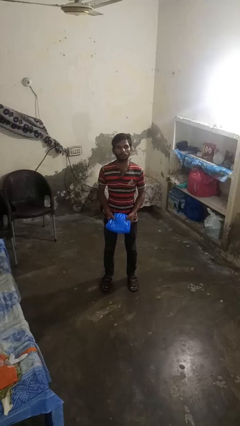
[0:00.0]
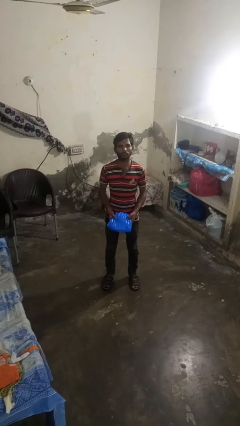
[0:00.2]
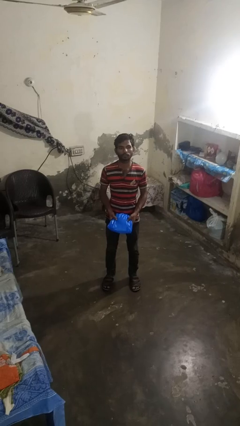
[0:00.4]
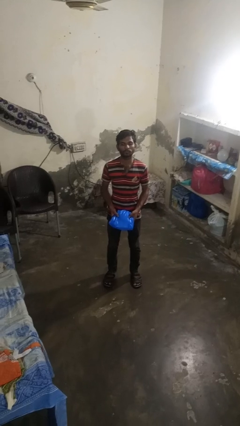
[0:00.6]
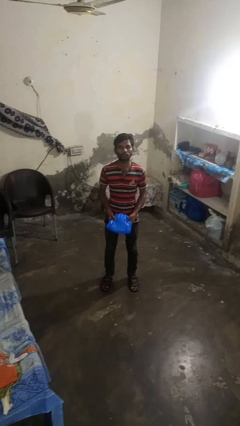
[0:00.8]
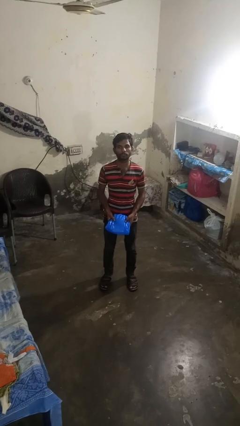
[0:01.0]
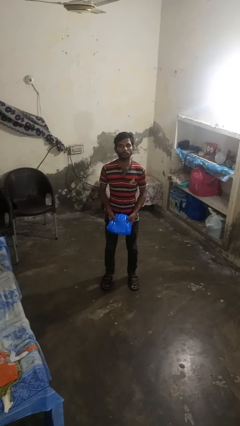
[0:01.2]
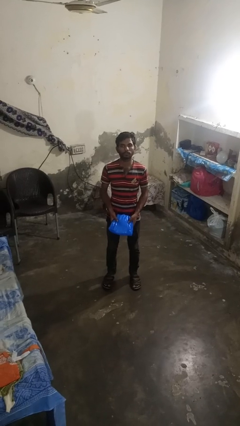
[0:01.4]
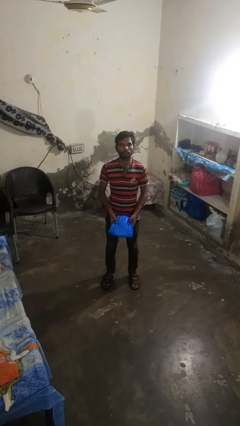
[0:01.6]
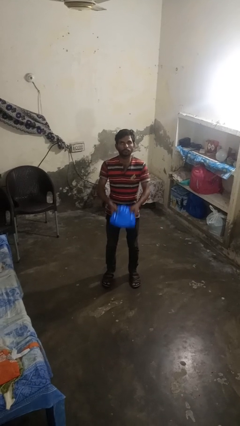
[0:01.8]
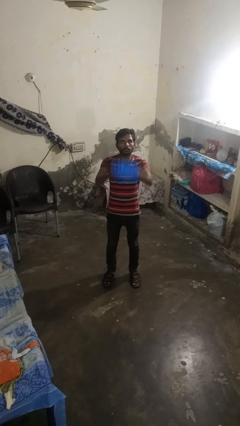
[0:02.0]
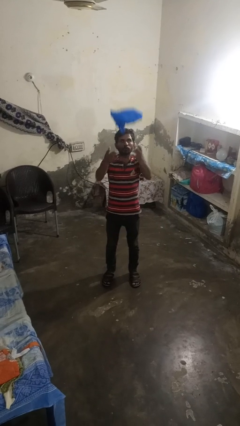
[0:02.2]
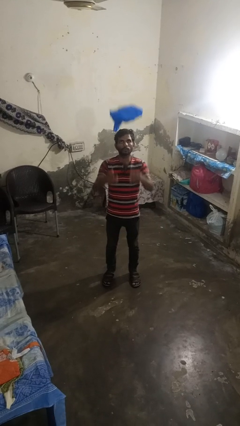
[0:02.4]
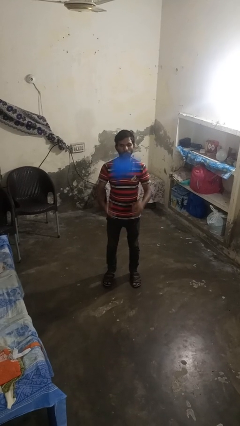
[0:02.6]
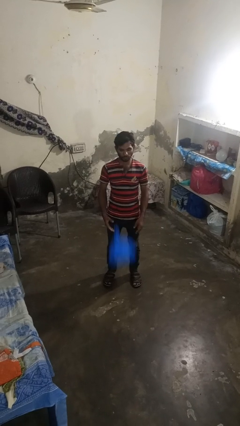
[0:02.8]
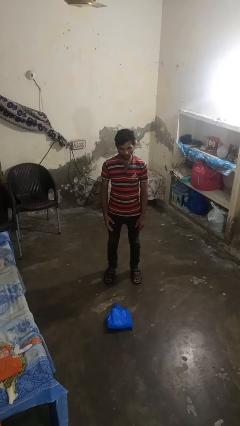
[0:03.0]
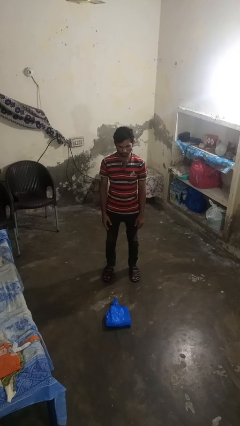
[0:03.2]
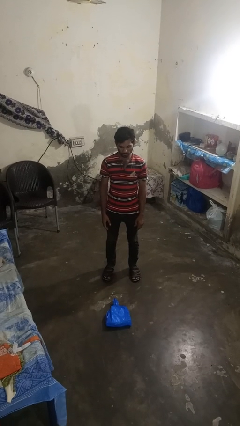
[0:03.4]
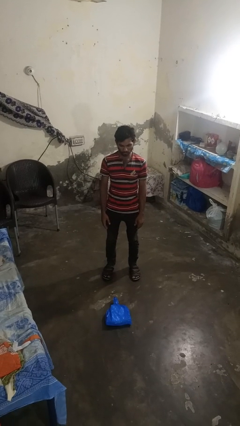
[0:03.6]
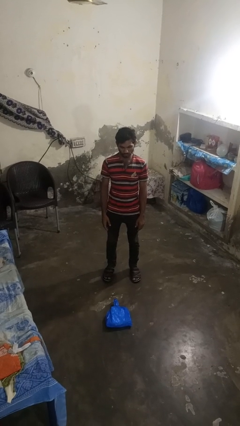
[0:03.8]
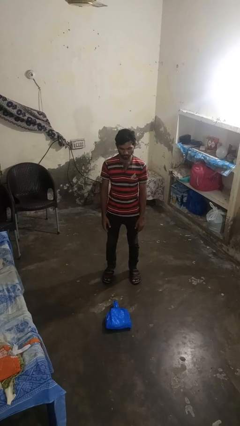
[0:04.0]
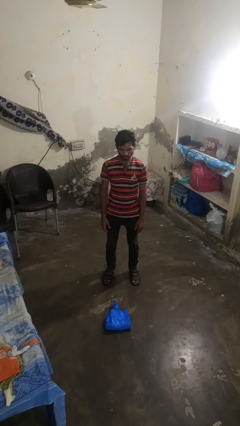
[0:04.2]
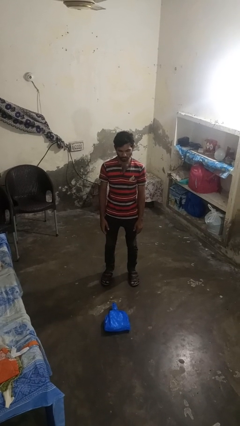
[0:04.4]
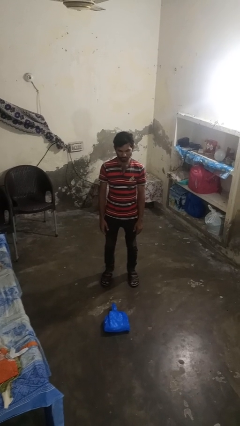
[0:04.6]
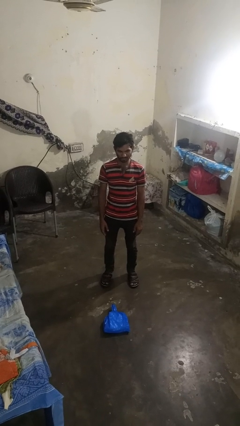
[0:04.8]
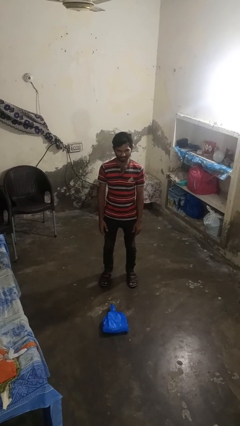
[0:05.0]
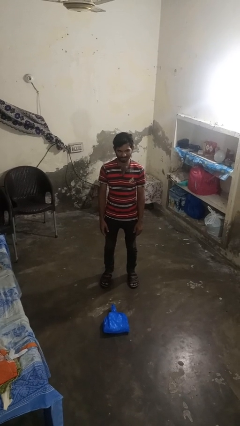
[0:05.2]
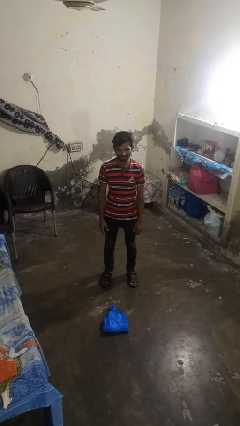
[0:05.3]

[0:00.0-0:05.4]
person throws object into air

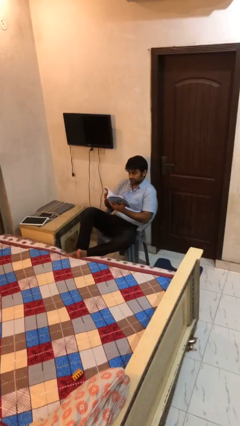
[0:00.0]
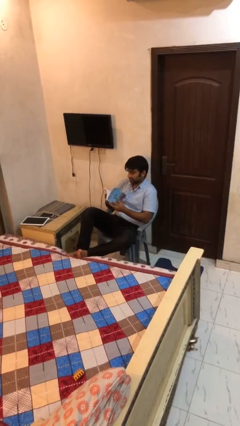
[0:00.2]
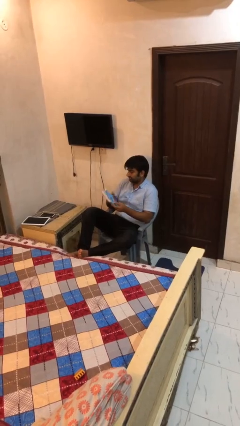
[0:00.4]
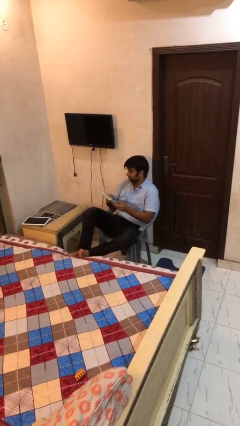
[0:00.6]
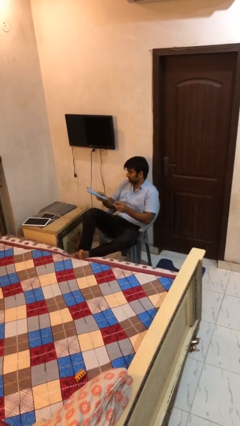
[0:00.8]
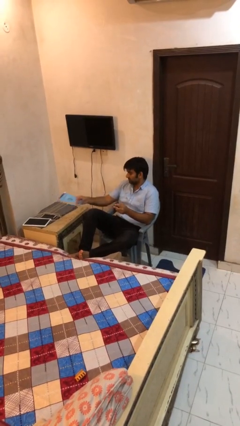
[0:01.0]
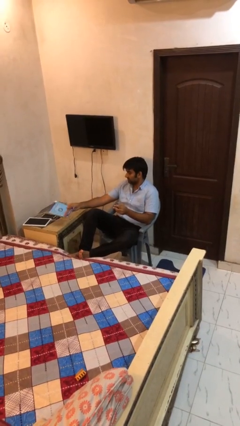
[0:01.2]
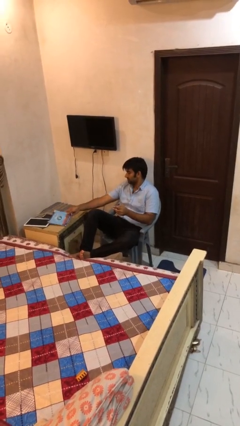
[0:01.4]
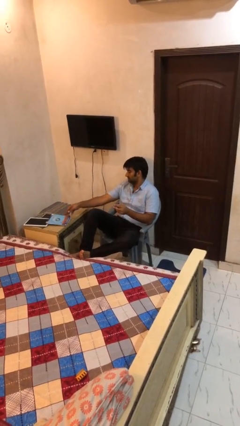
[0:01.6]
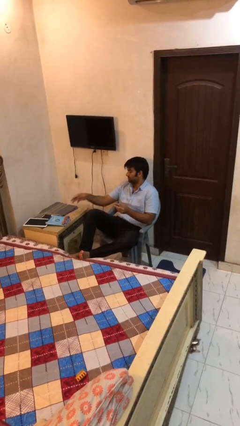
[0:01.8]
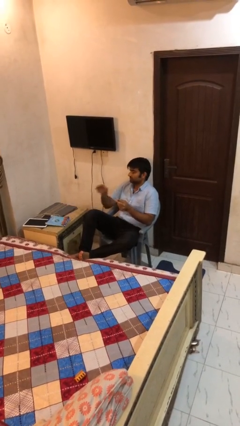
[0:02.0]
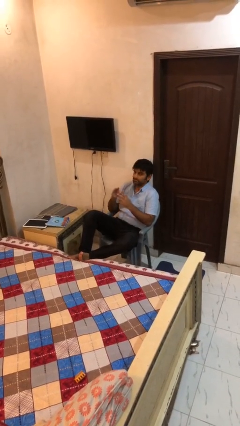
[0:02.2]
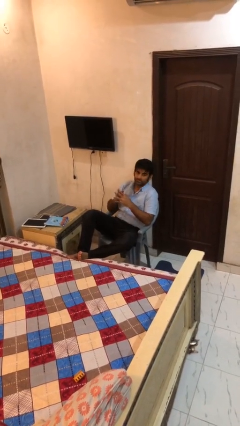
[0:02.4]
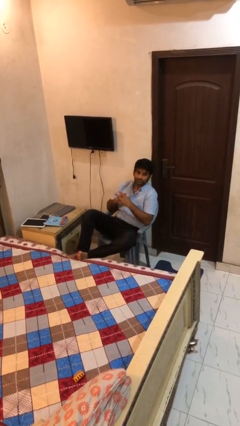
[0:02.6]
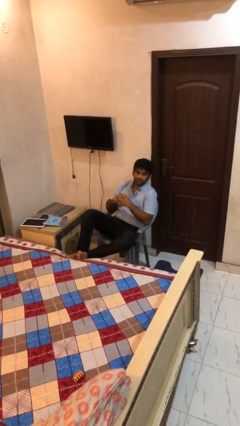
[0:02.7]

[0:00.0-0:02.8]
person puts down object on table

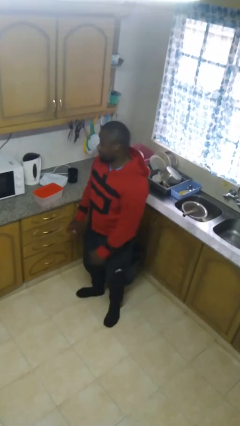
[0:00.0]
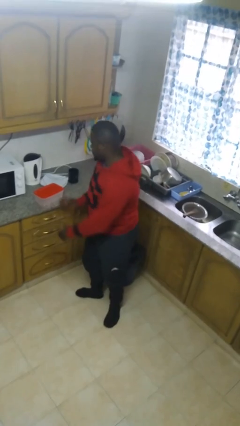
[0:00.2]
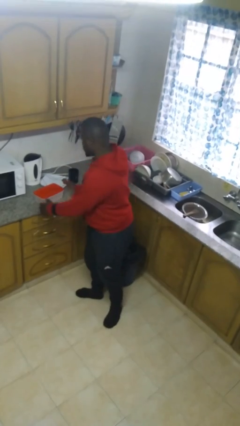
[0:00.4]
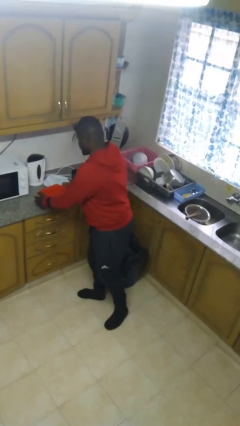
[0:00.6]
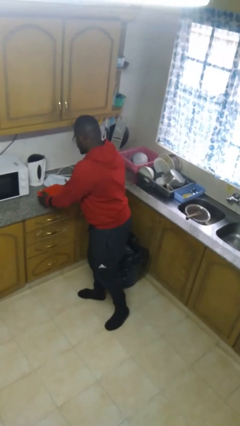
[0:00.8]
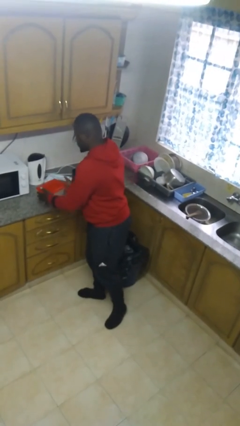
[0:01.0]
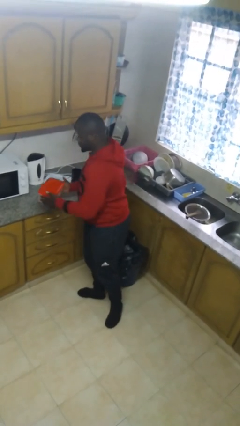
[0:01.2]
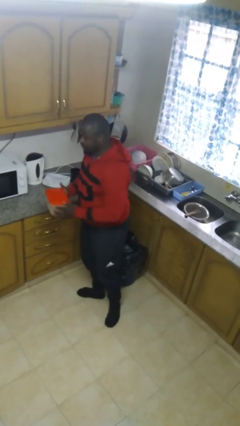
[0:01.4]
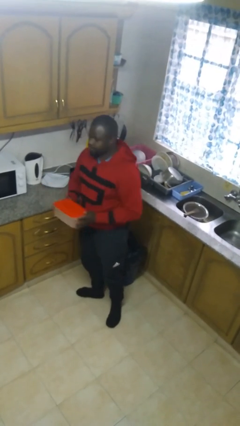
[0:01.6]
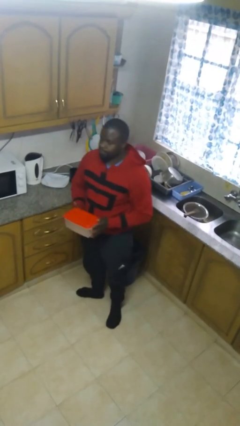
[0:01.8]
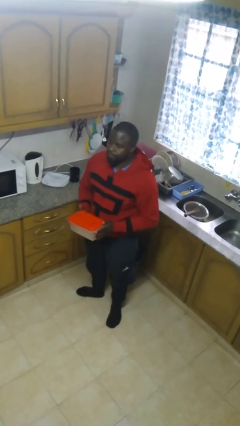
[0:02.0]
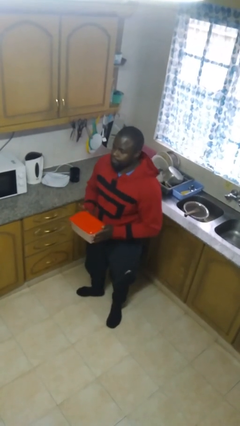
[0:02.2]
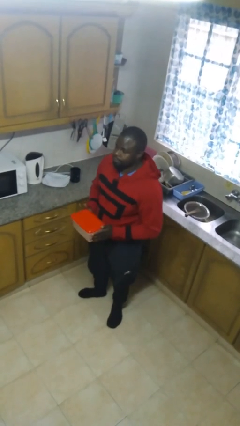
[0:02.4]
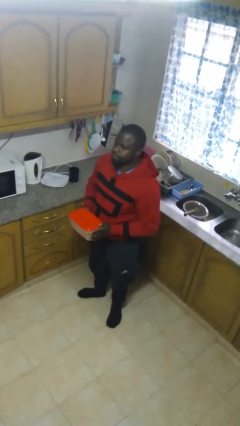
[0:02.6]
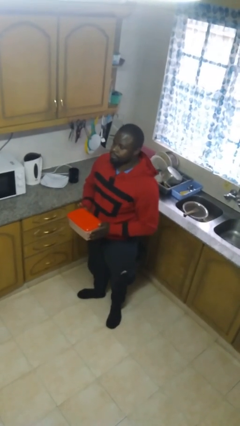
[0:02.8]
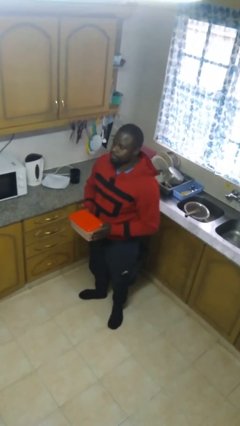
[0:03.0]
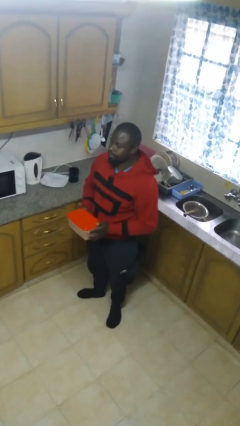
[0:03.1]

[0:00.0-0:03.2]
person picks up object from countertop

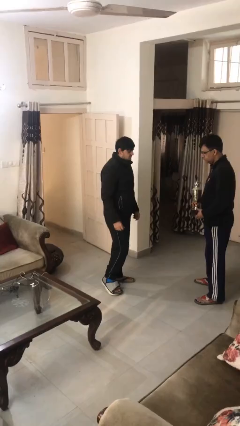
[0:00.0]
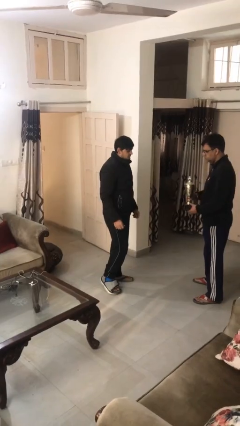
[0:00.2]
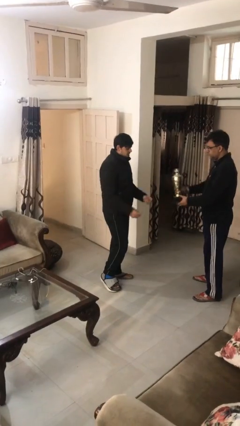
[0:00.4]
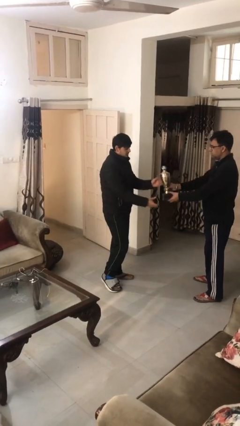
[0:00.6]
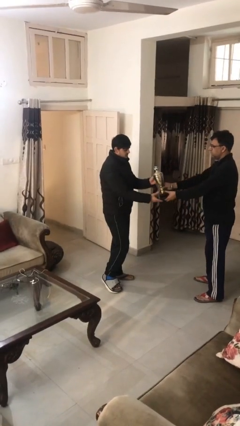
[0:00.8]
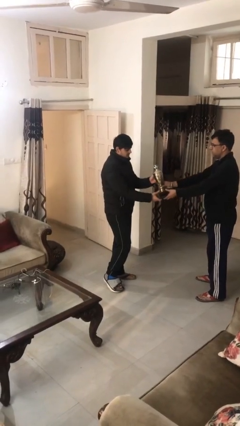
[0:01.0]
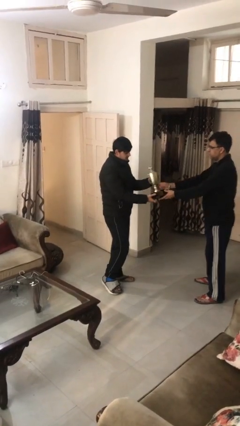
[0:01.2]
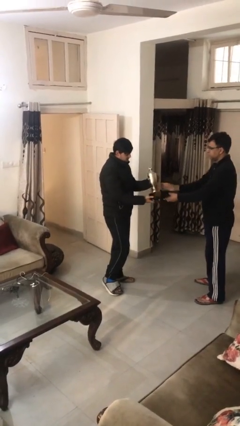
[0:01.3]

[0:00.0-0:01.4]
person transfers object to person

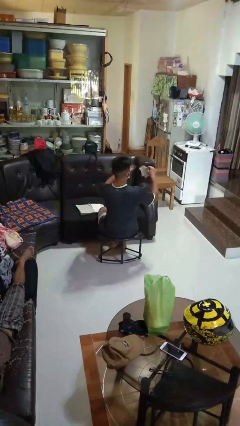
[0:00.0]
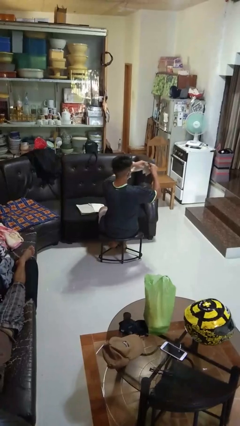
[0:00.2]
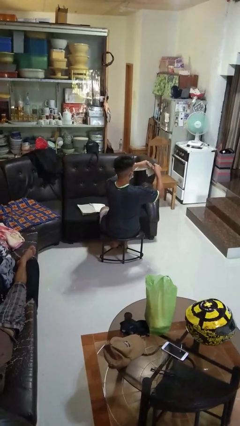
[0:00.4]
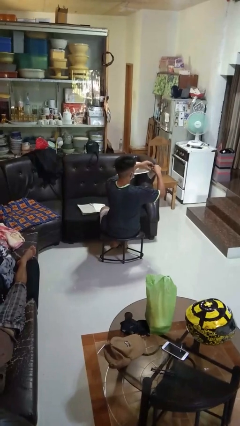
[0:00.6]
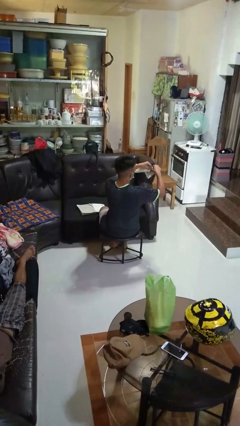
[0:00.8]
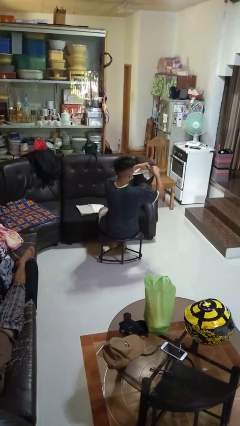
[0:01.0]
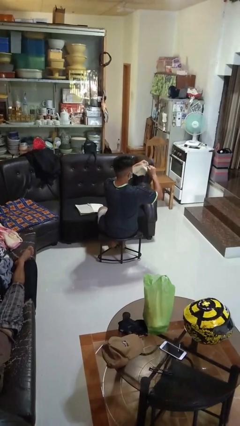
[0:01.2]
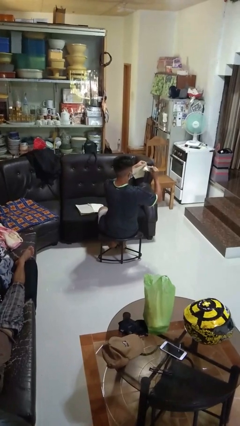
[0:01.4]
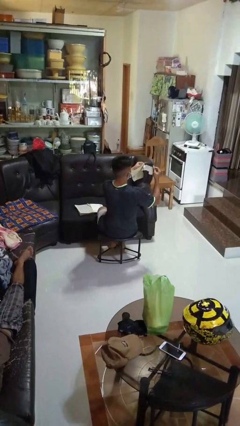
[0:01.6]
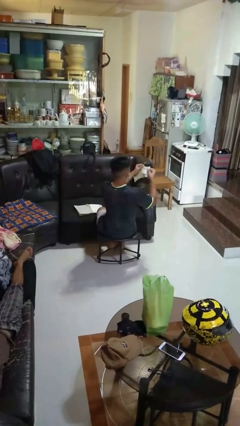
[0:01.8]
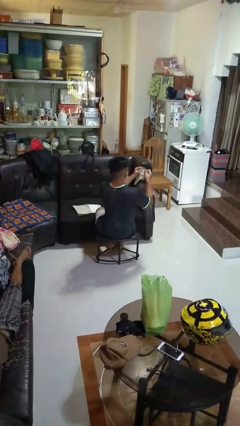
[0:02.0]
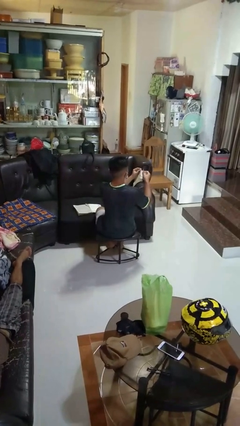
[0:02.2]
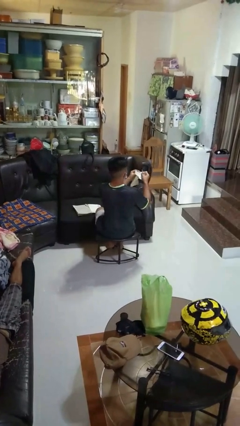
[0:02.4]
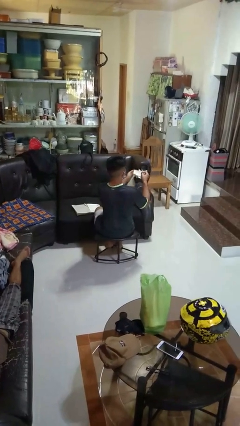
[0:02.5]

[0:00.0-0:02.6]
person tears paper

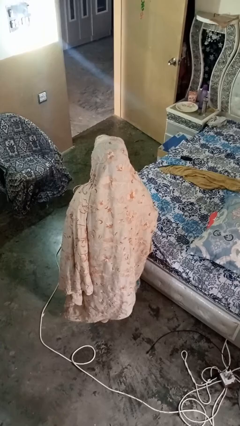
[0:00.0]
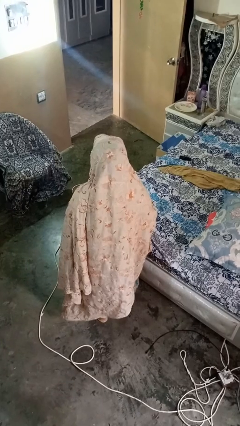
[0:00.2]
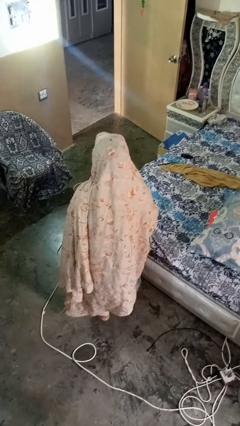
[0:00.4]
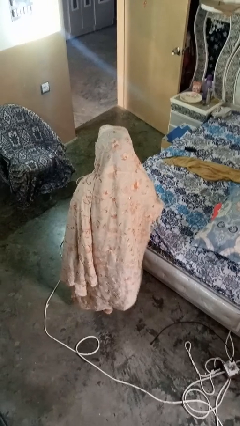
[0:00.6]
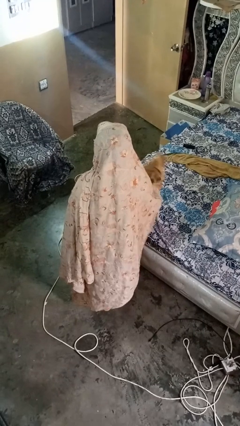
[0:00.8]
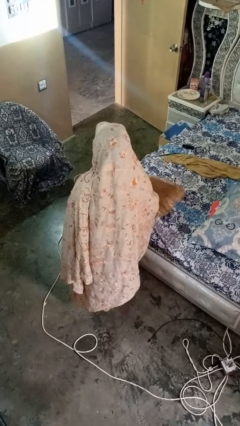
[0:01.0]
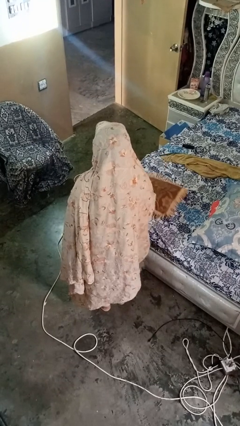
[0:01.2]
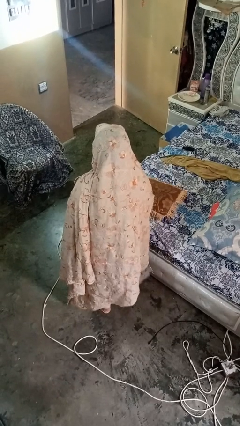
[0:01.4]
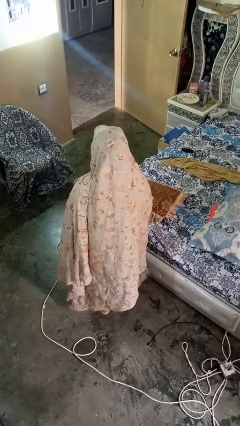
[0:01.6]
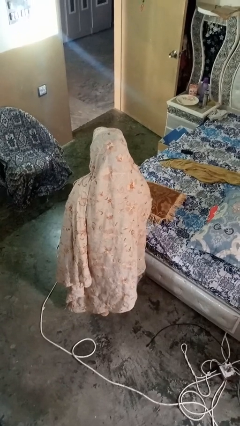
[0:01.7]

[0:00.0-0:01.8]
person puts down object on bed

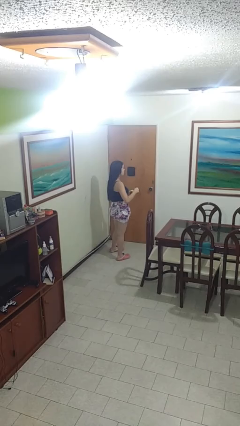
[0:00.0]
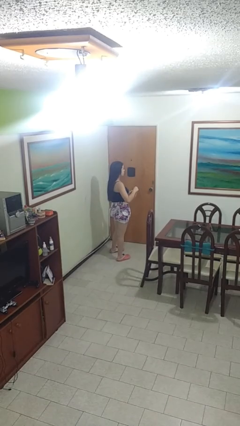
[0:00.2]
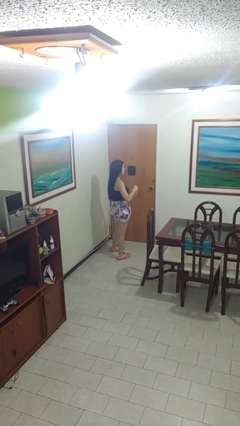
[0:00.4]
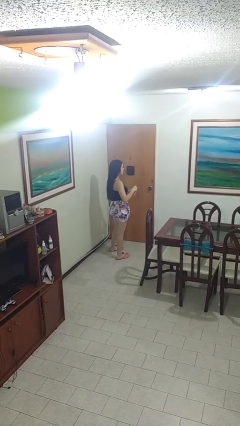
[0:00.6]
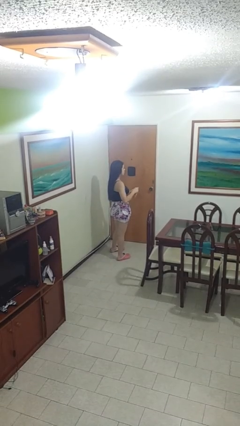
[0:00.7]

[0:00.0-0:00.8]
person stirs mug
